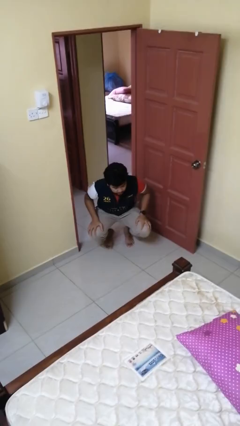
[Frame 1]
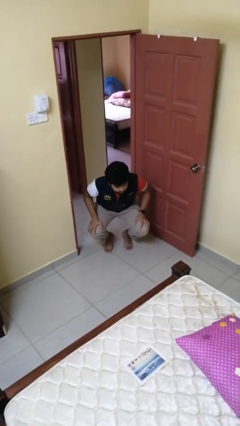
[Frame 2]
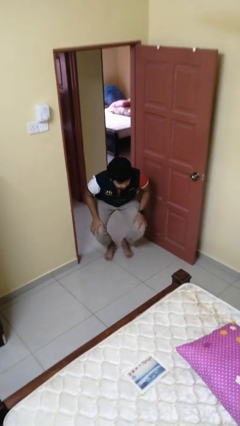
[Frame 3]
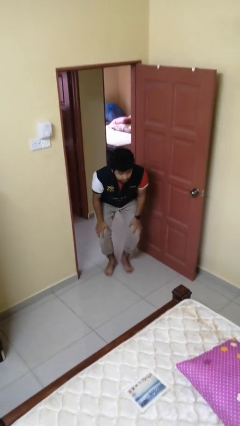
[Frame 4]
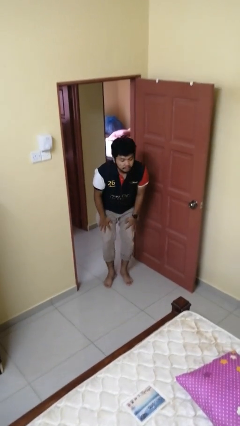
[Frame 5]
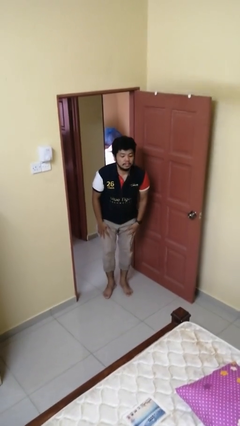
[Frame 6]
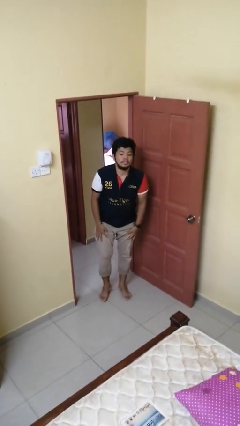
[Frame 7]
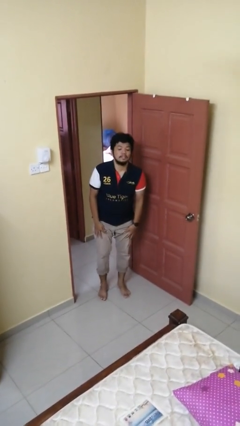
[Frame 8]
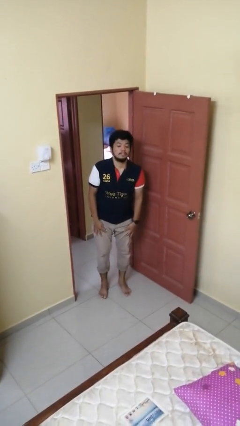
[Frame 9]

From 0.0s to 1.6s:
person stands up

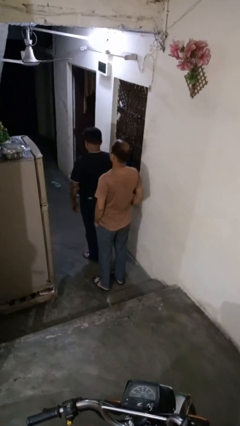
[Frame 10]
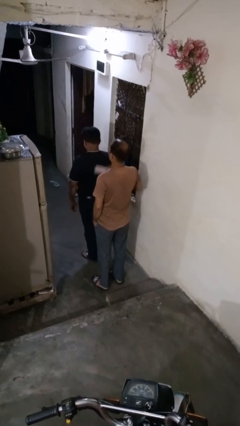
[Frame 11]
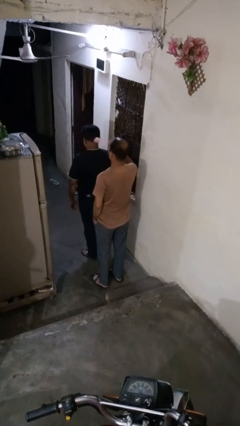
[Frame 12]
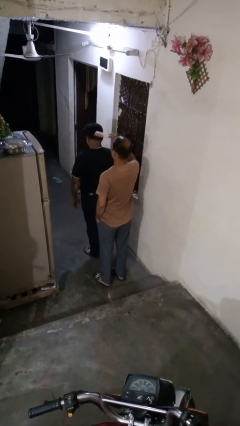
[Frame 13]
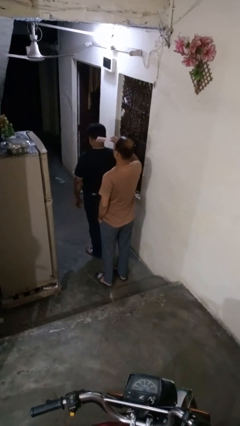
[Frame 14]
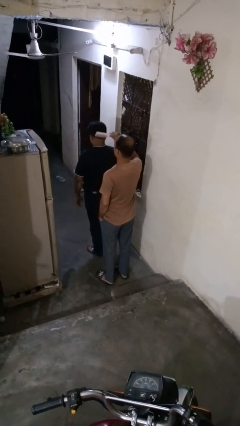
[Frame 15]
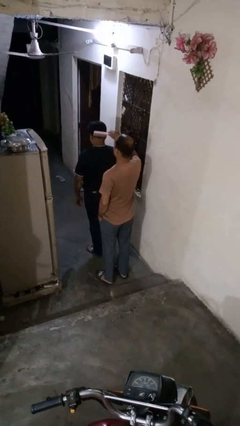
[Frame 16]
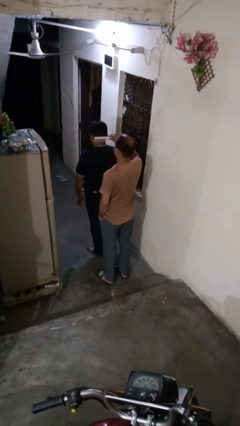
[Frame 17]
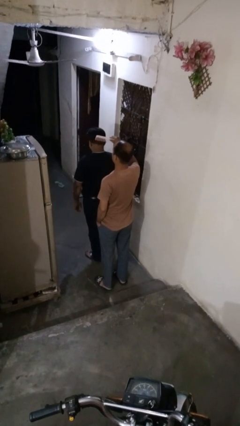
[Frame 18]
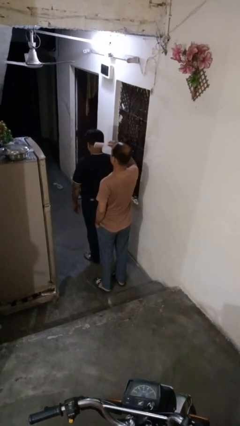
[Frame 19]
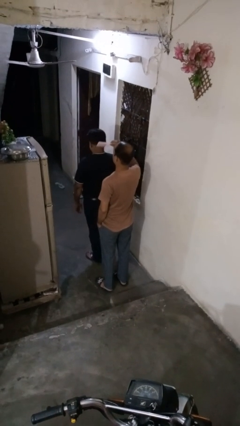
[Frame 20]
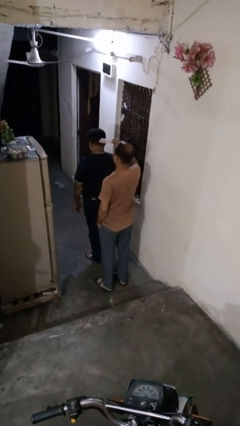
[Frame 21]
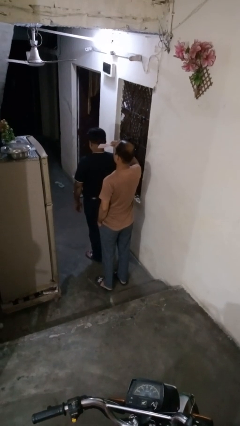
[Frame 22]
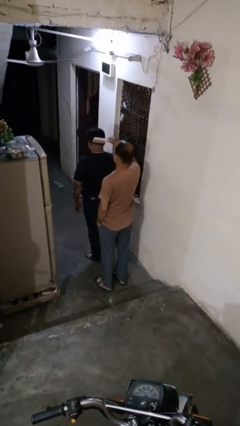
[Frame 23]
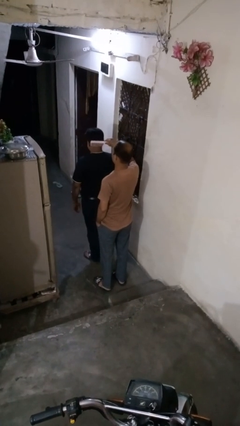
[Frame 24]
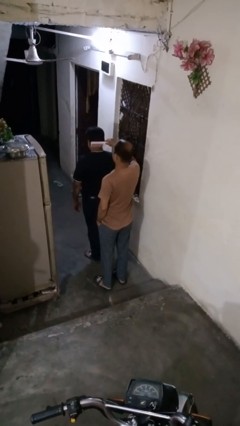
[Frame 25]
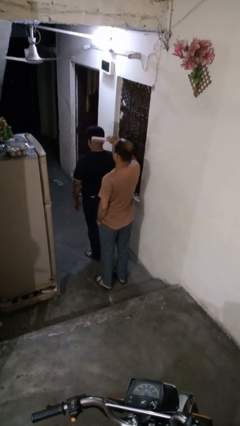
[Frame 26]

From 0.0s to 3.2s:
person brushes hair of person

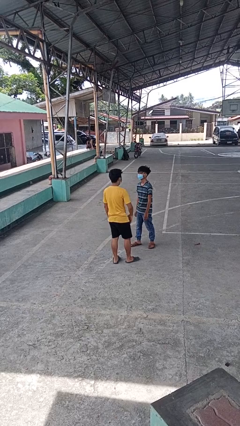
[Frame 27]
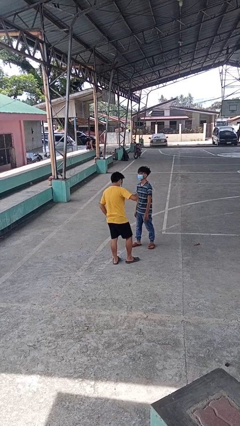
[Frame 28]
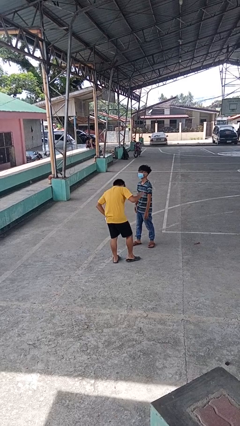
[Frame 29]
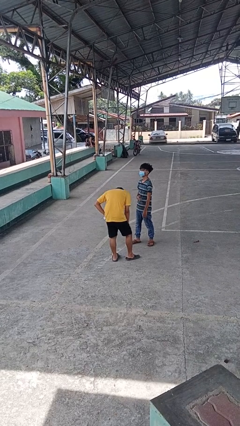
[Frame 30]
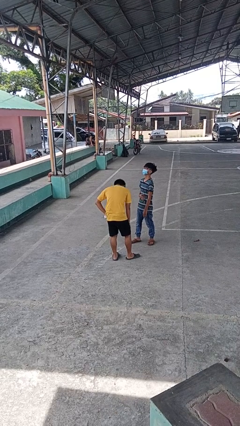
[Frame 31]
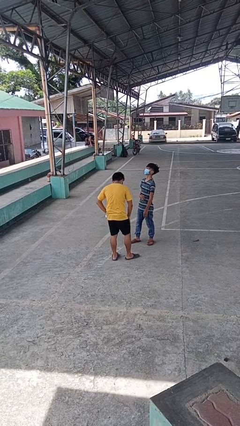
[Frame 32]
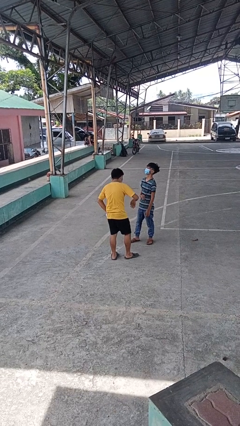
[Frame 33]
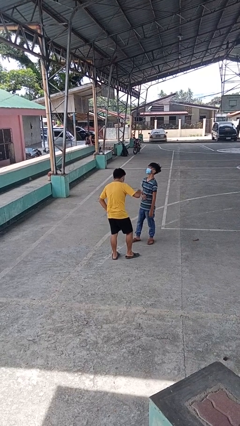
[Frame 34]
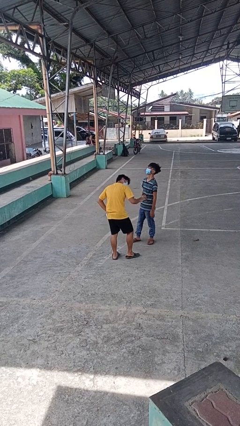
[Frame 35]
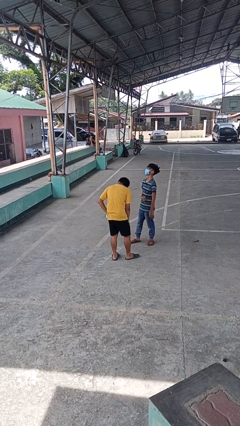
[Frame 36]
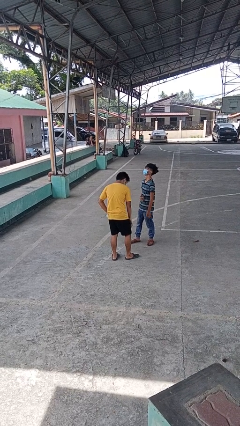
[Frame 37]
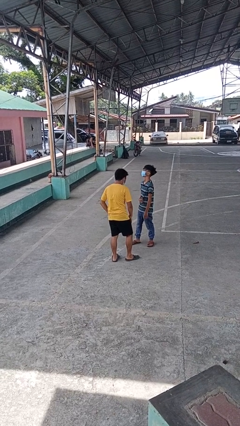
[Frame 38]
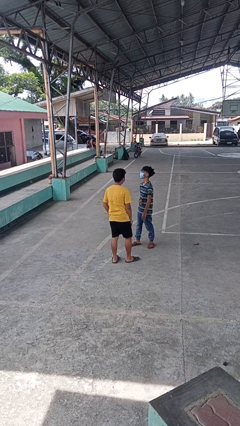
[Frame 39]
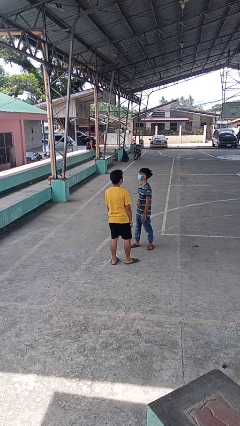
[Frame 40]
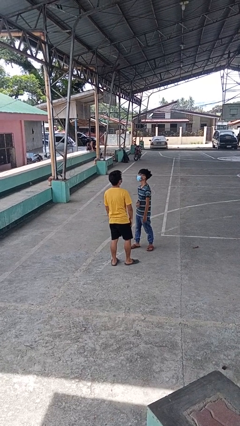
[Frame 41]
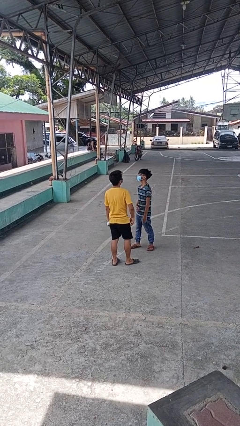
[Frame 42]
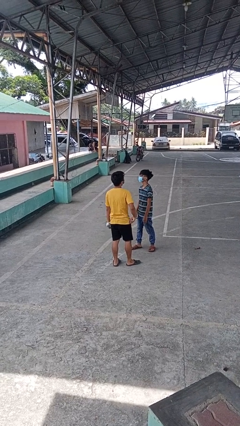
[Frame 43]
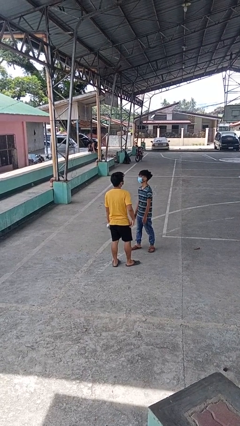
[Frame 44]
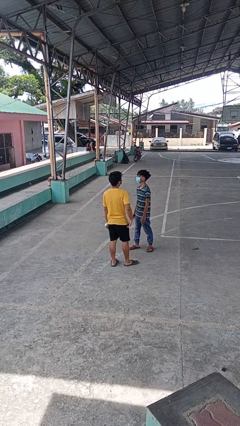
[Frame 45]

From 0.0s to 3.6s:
person laughs with person

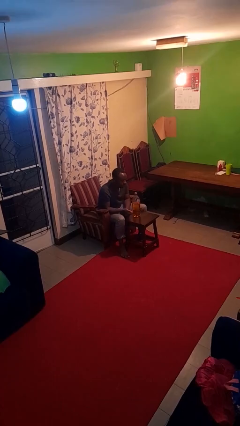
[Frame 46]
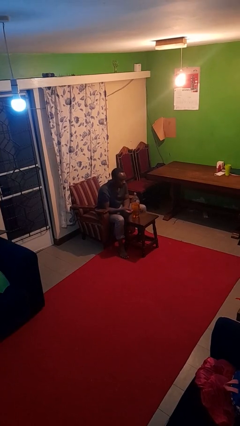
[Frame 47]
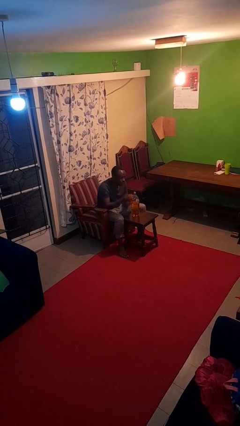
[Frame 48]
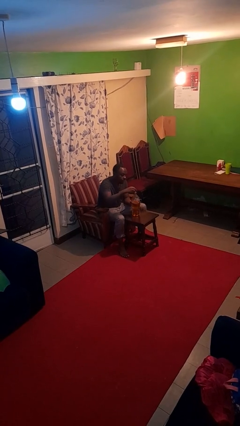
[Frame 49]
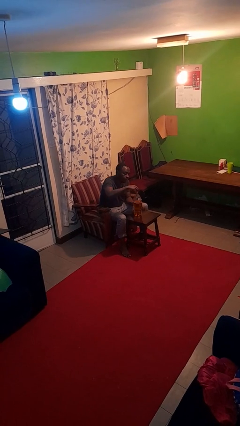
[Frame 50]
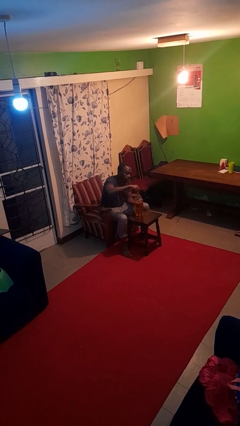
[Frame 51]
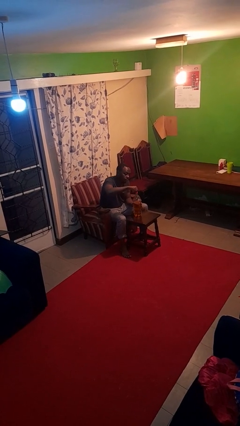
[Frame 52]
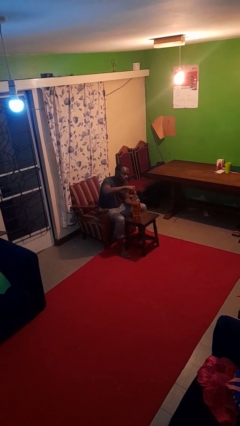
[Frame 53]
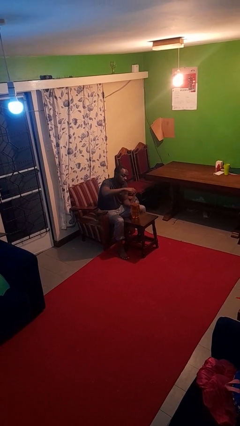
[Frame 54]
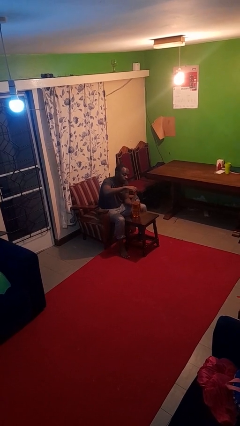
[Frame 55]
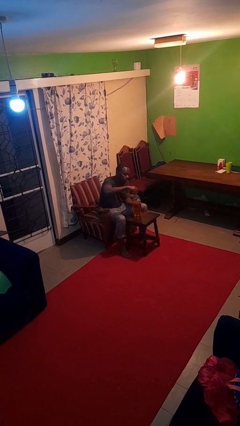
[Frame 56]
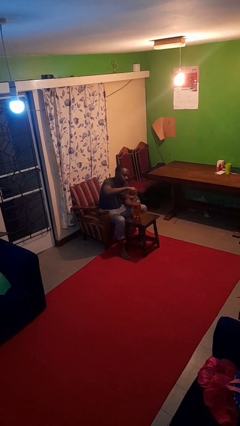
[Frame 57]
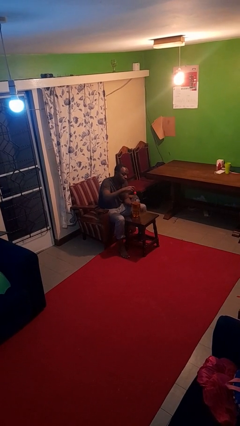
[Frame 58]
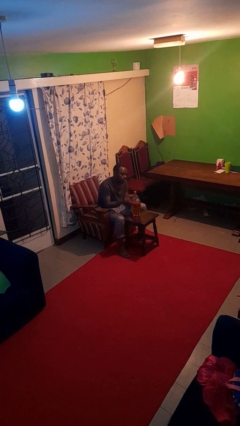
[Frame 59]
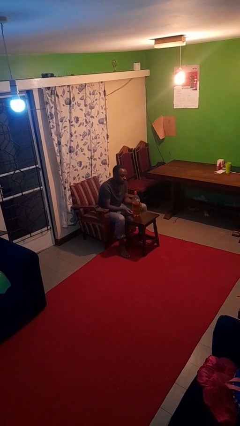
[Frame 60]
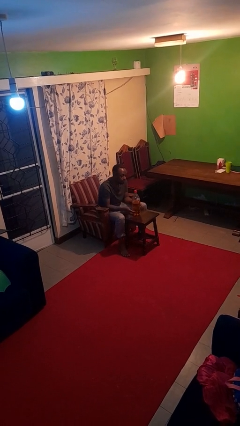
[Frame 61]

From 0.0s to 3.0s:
person screws lid to bottle

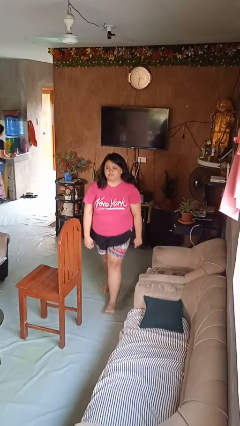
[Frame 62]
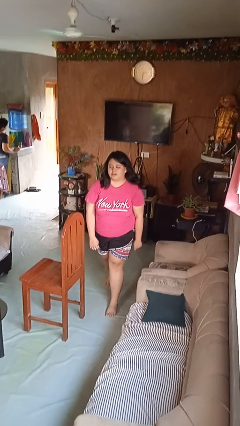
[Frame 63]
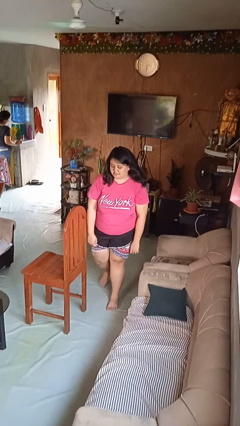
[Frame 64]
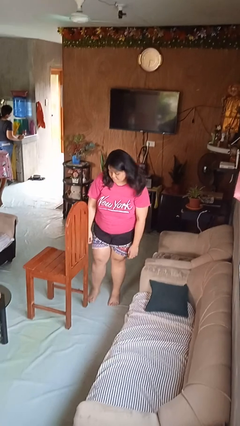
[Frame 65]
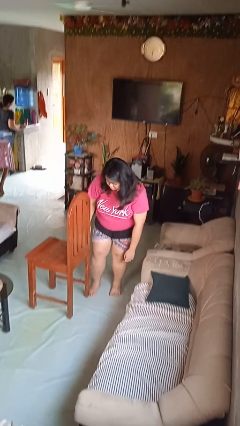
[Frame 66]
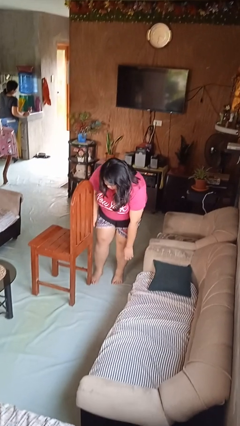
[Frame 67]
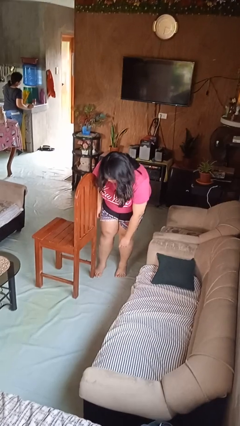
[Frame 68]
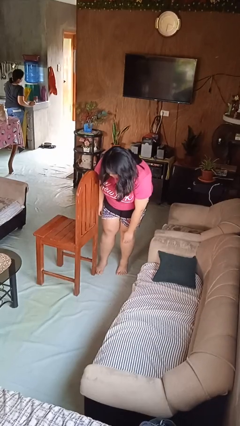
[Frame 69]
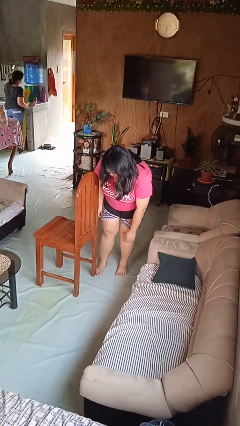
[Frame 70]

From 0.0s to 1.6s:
person stubs toe

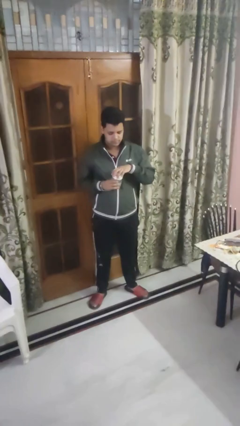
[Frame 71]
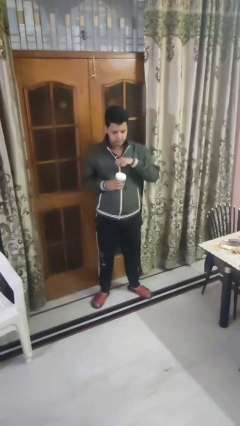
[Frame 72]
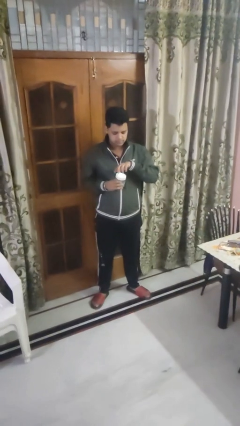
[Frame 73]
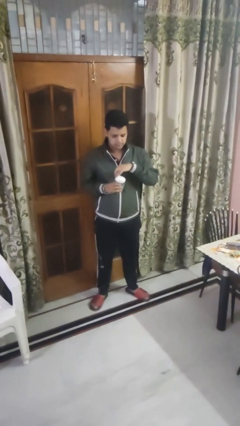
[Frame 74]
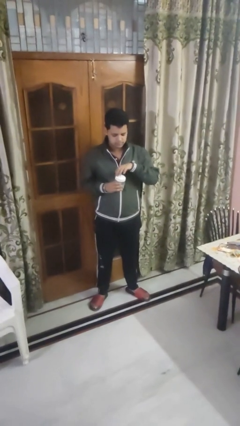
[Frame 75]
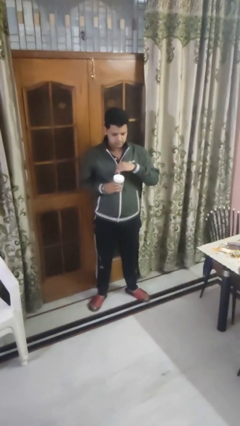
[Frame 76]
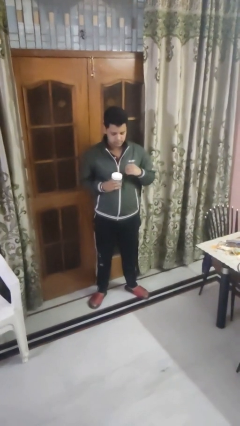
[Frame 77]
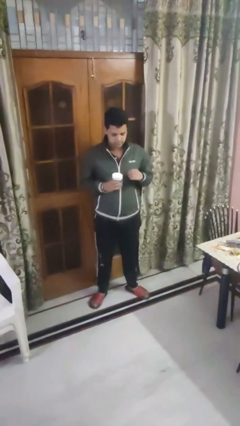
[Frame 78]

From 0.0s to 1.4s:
person closes jar

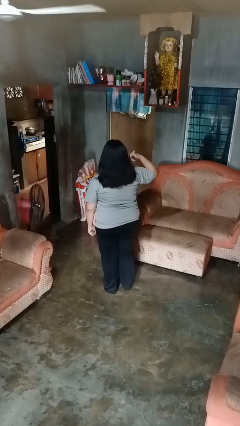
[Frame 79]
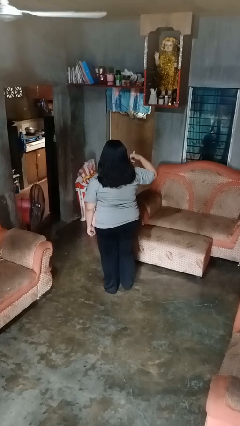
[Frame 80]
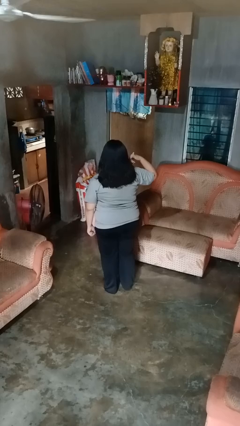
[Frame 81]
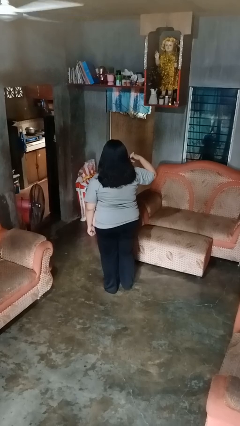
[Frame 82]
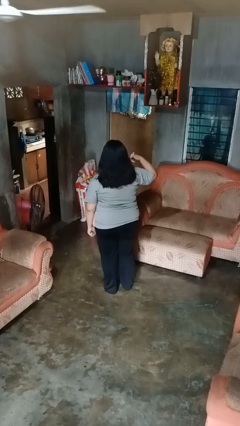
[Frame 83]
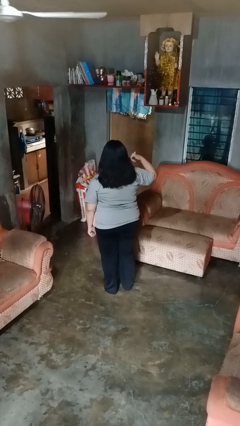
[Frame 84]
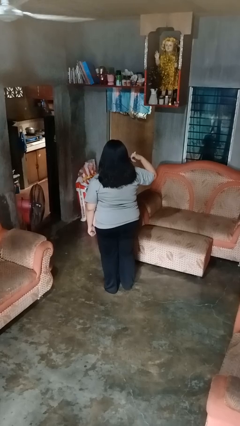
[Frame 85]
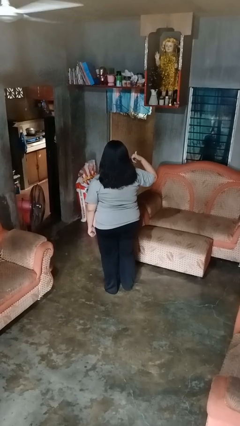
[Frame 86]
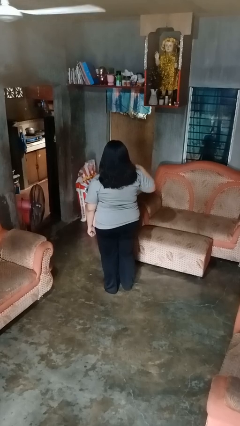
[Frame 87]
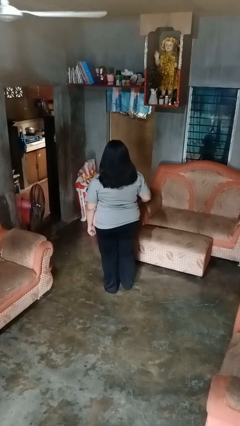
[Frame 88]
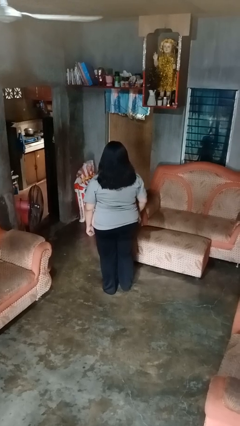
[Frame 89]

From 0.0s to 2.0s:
person gestures call me

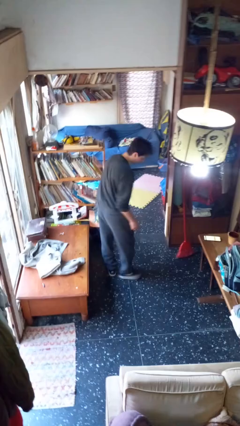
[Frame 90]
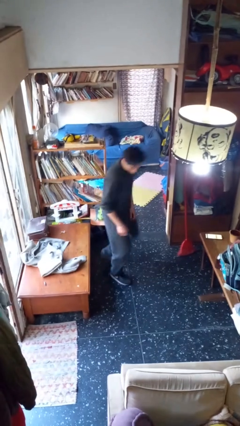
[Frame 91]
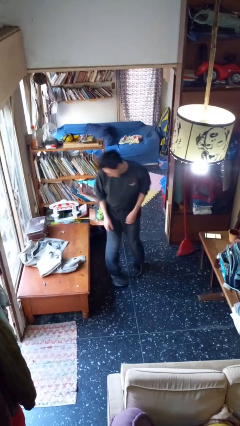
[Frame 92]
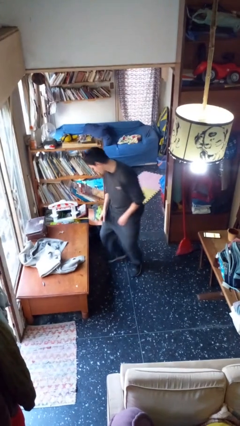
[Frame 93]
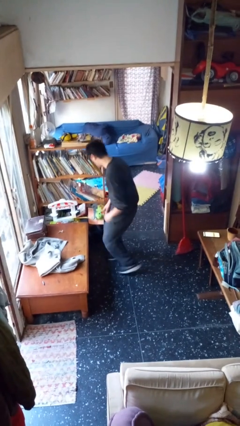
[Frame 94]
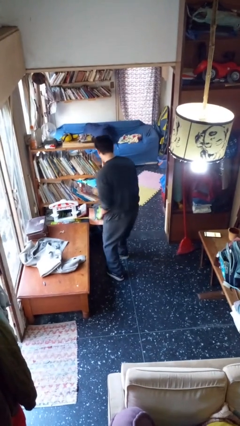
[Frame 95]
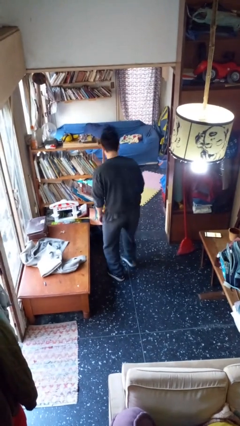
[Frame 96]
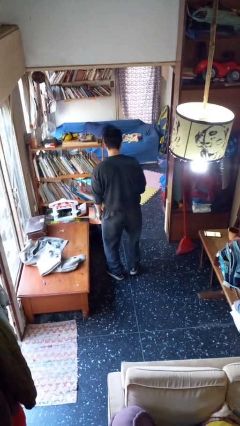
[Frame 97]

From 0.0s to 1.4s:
person twirls
